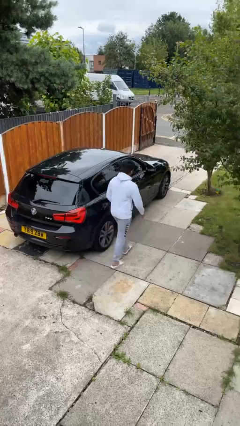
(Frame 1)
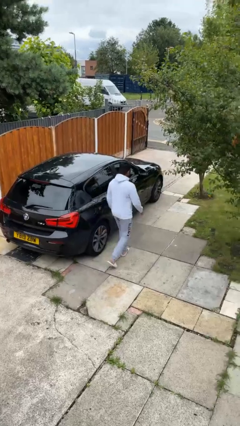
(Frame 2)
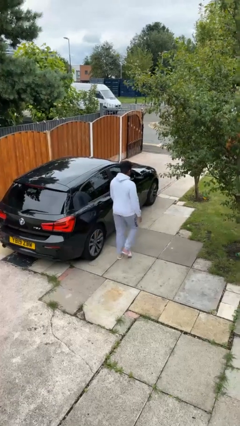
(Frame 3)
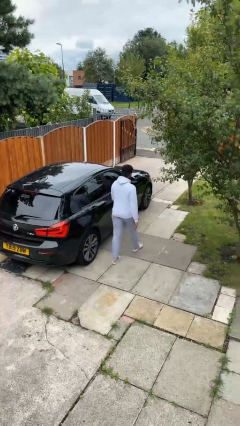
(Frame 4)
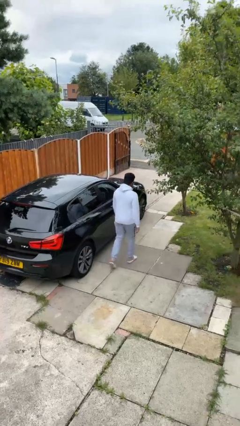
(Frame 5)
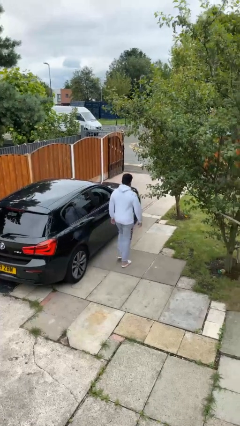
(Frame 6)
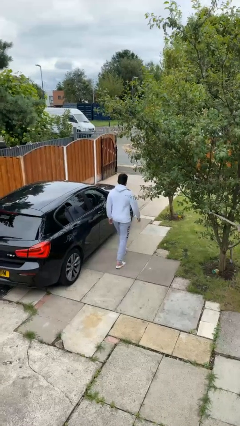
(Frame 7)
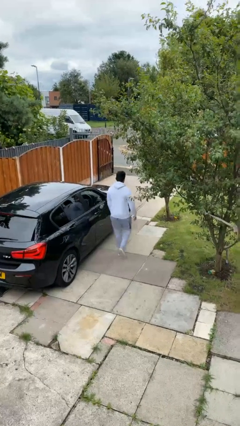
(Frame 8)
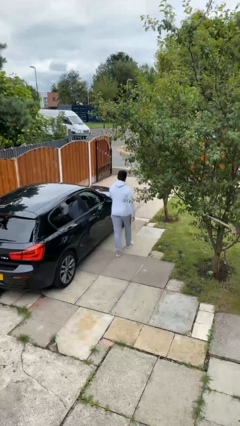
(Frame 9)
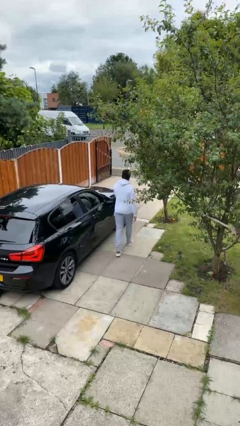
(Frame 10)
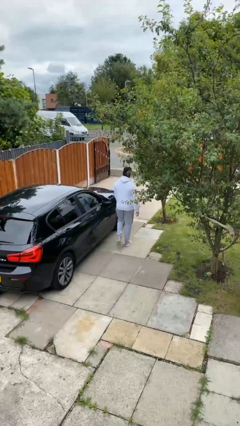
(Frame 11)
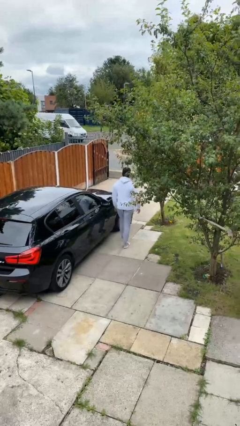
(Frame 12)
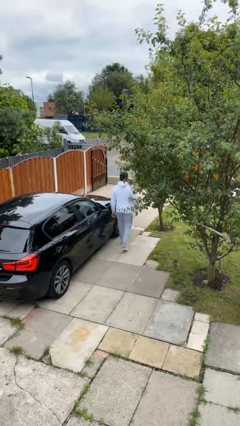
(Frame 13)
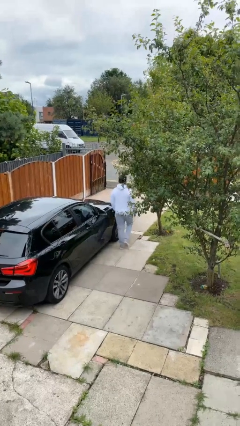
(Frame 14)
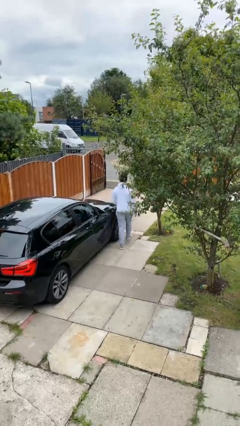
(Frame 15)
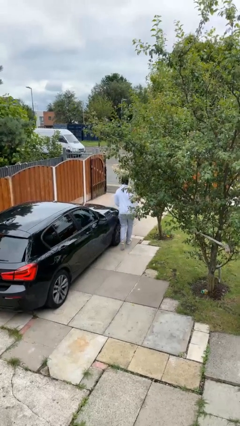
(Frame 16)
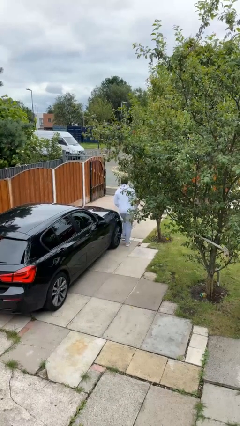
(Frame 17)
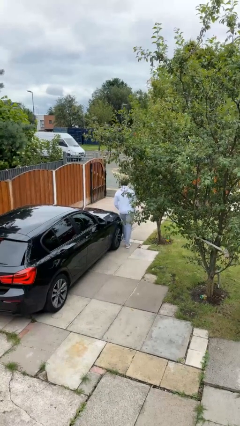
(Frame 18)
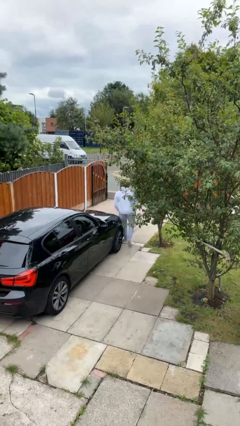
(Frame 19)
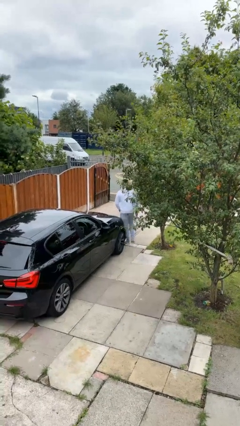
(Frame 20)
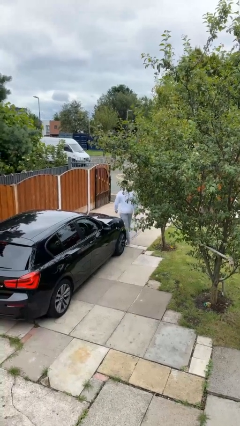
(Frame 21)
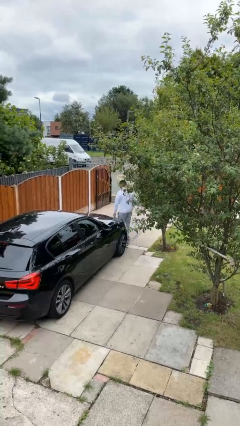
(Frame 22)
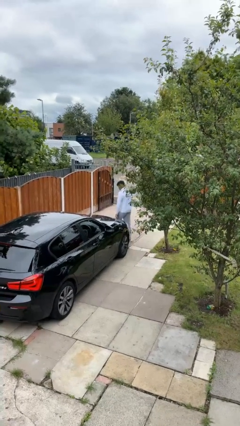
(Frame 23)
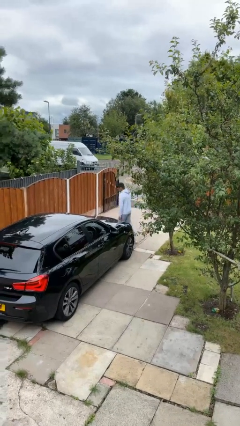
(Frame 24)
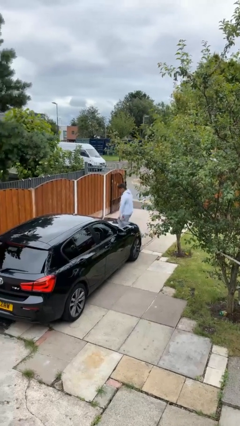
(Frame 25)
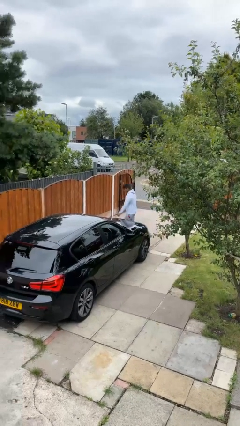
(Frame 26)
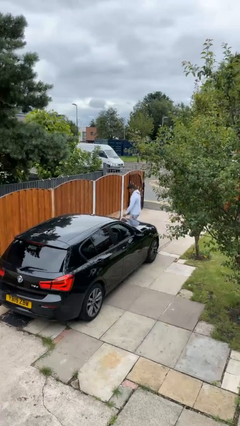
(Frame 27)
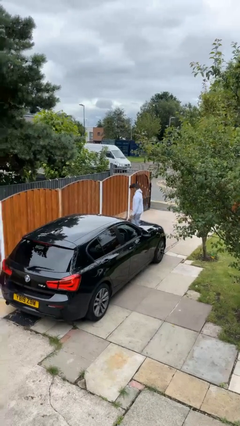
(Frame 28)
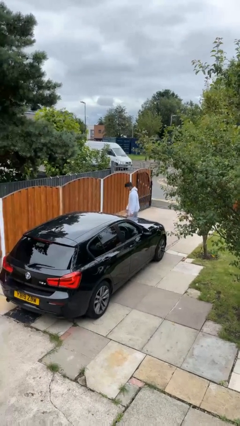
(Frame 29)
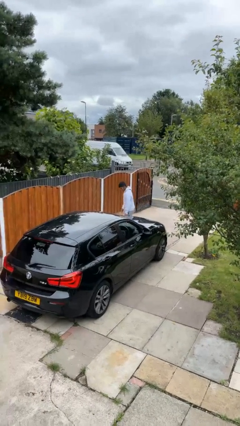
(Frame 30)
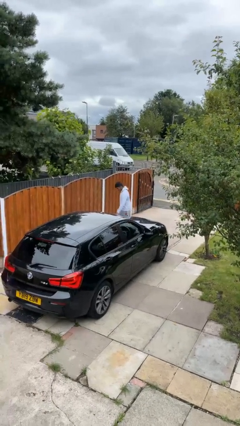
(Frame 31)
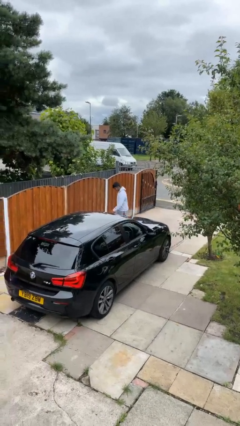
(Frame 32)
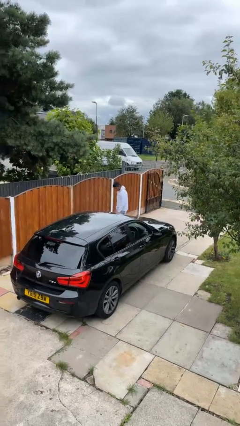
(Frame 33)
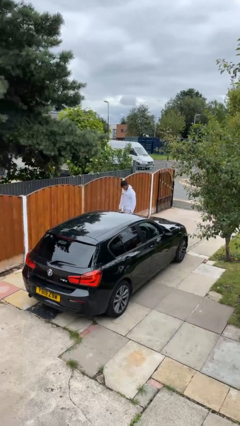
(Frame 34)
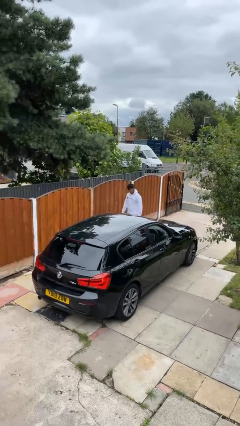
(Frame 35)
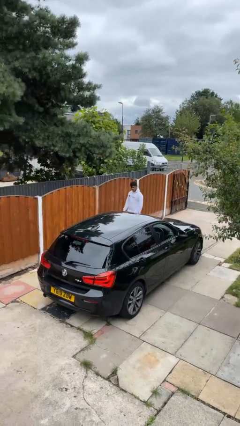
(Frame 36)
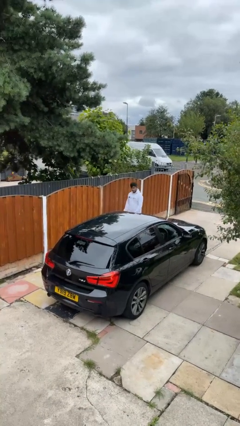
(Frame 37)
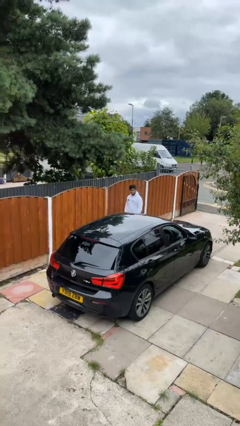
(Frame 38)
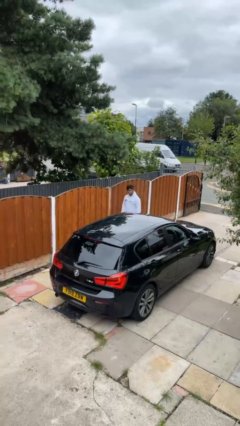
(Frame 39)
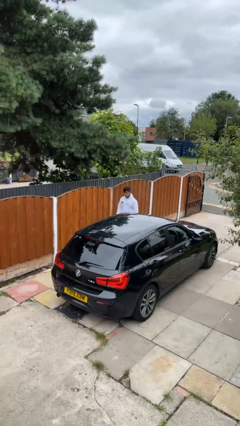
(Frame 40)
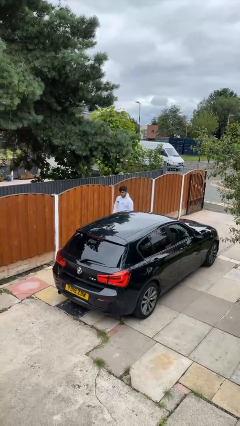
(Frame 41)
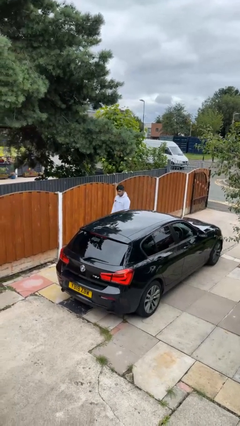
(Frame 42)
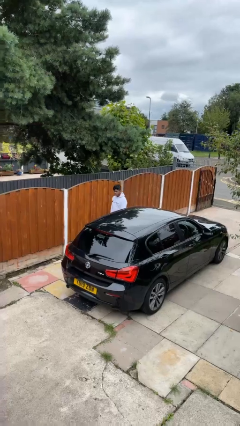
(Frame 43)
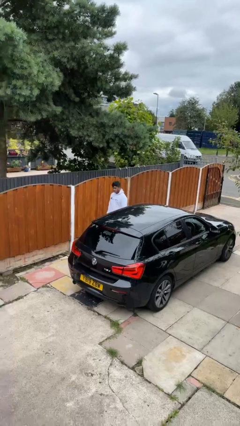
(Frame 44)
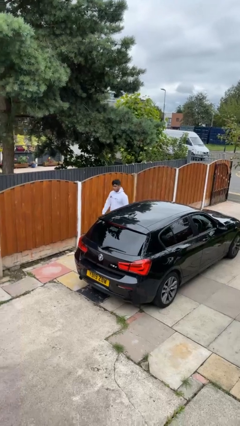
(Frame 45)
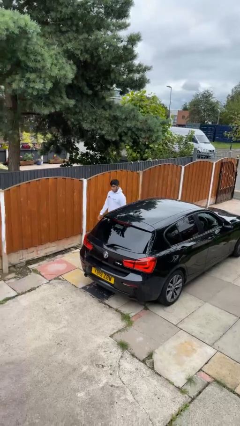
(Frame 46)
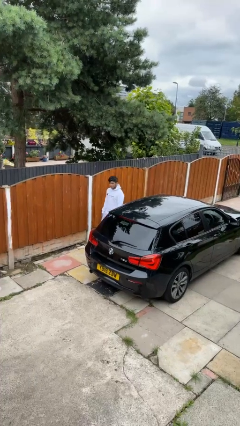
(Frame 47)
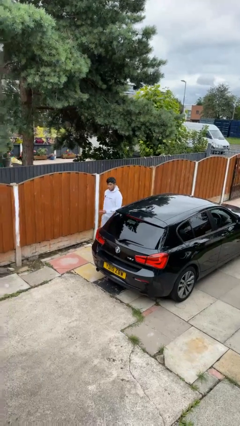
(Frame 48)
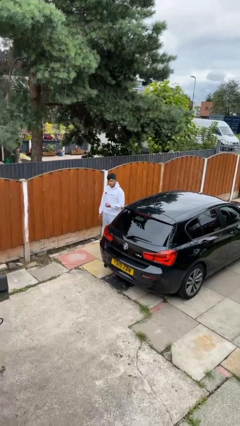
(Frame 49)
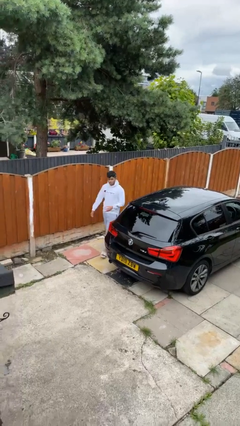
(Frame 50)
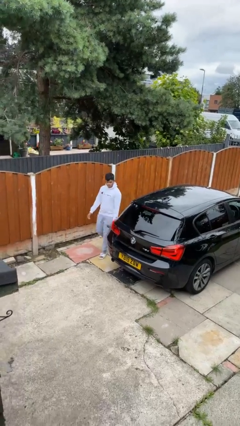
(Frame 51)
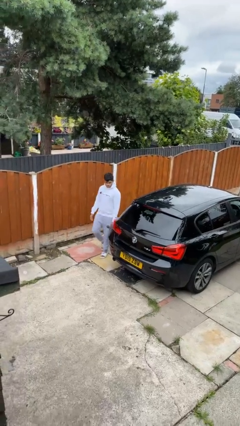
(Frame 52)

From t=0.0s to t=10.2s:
person walks around car

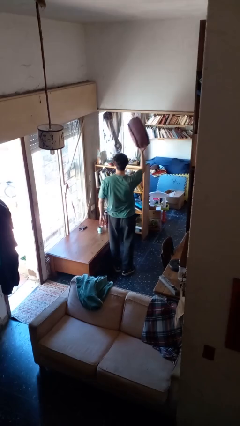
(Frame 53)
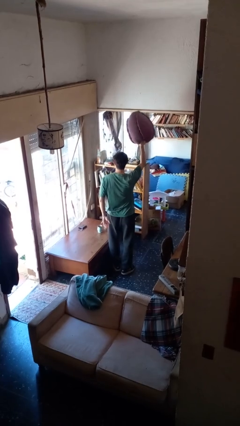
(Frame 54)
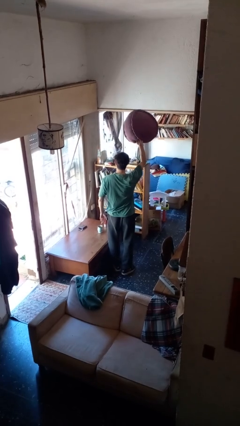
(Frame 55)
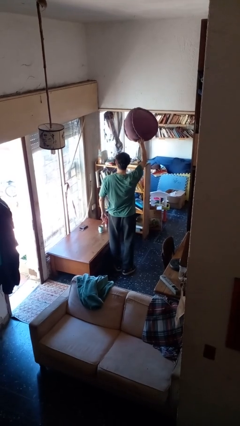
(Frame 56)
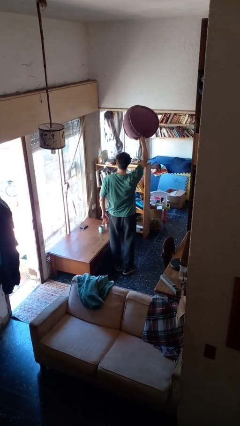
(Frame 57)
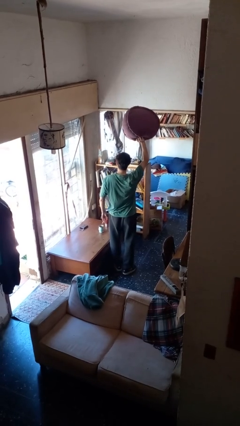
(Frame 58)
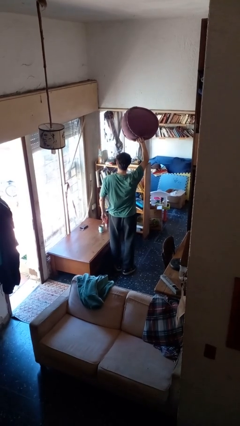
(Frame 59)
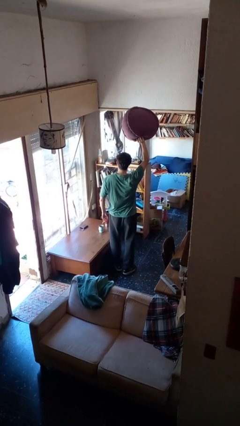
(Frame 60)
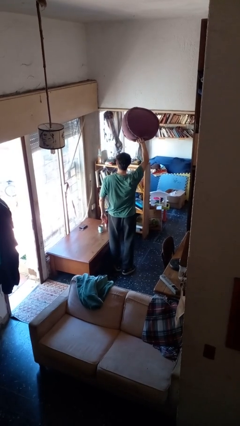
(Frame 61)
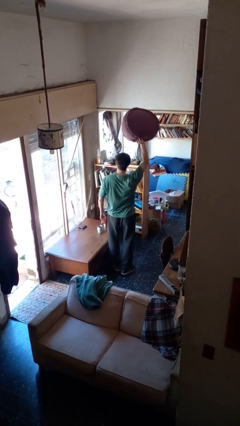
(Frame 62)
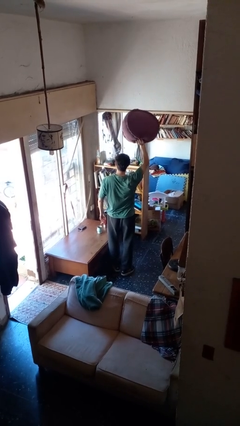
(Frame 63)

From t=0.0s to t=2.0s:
person holds object above head

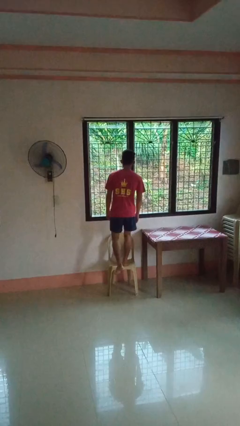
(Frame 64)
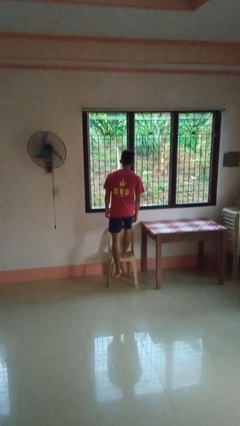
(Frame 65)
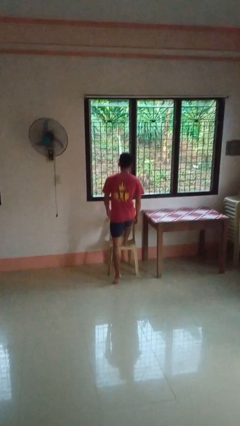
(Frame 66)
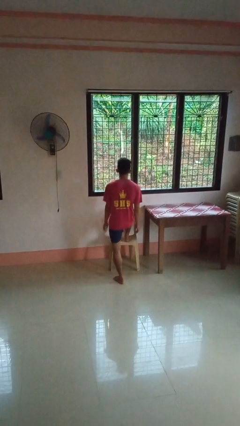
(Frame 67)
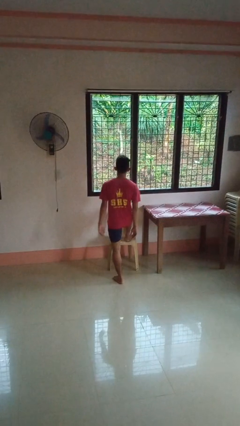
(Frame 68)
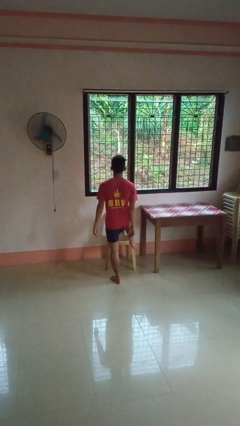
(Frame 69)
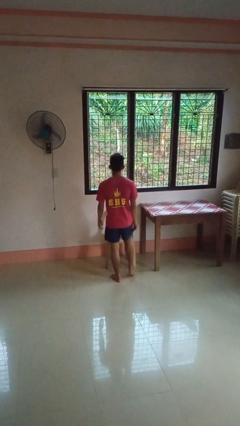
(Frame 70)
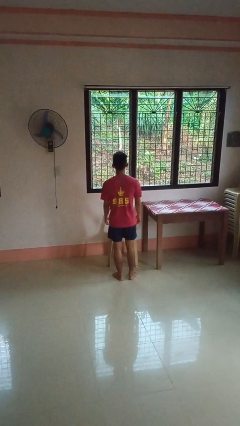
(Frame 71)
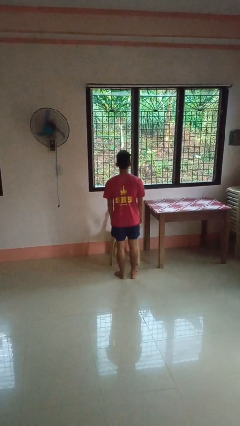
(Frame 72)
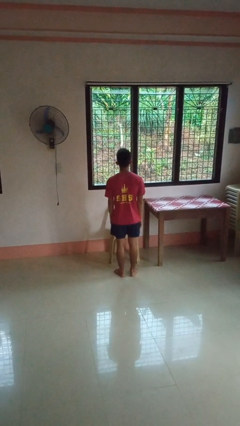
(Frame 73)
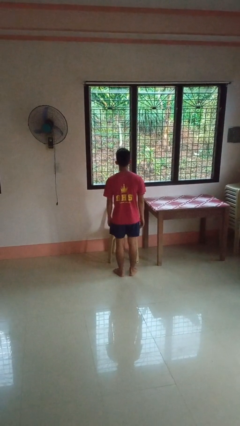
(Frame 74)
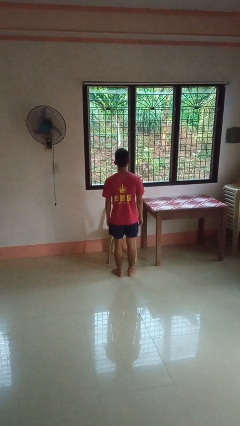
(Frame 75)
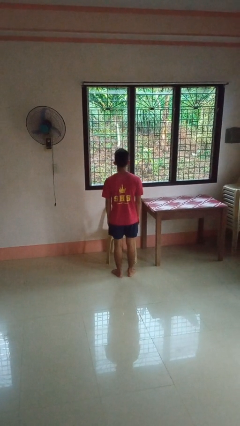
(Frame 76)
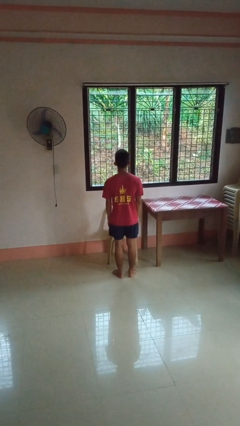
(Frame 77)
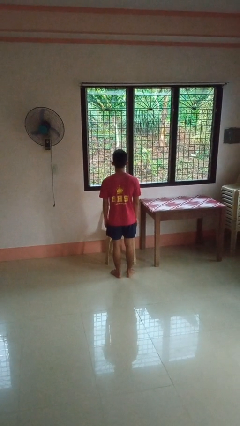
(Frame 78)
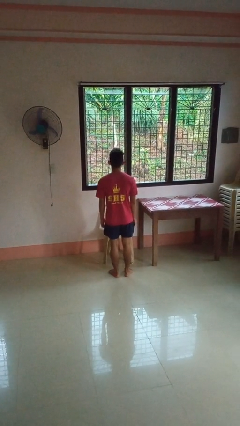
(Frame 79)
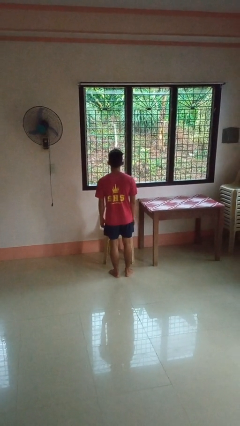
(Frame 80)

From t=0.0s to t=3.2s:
person climbs off chair

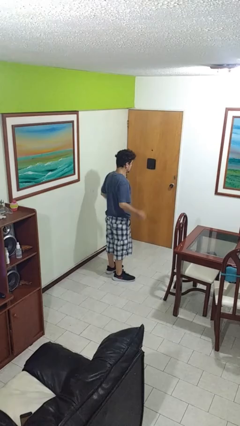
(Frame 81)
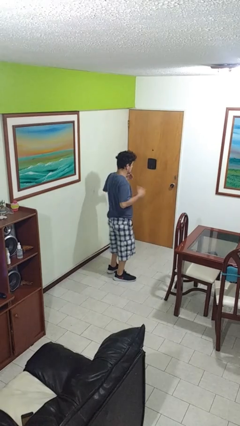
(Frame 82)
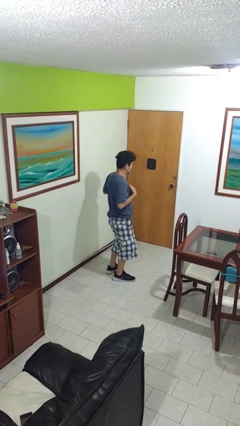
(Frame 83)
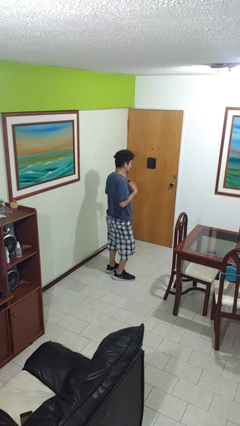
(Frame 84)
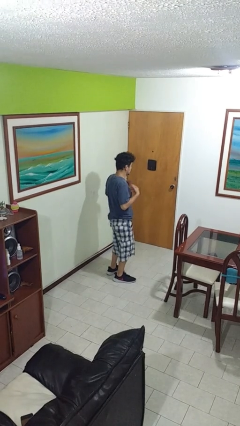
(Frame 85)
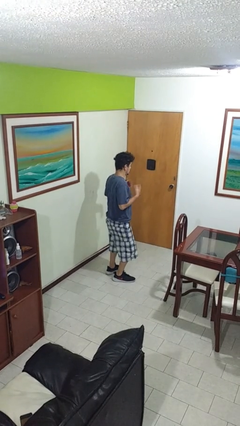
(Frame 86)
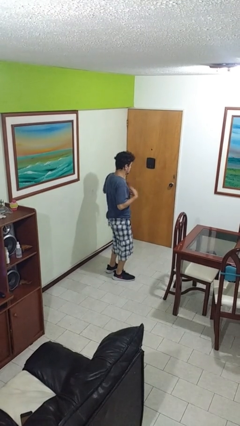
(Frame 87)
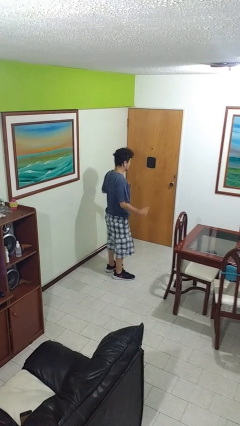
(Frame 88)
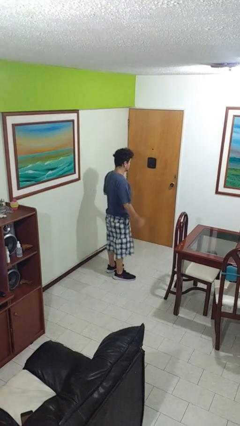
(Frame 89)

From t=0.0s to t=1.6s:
person drums on chest

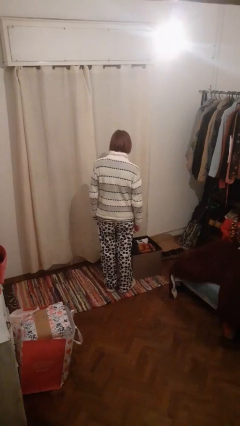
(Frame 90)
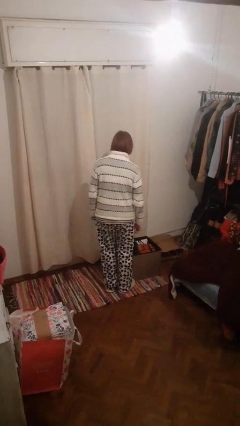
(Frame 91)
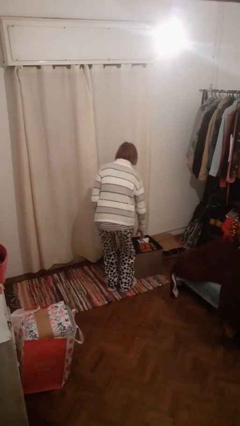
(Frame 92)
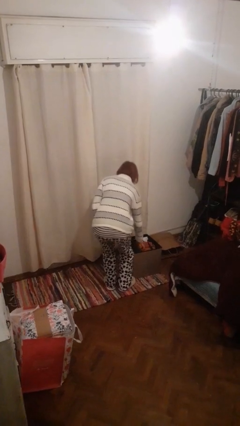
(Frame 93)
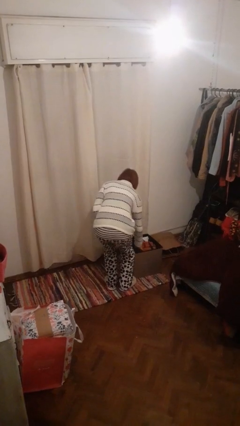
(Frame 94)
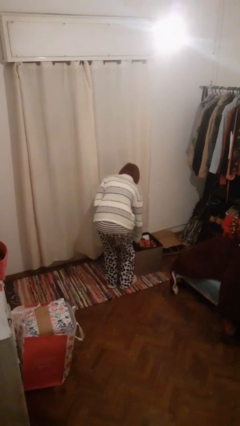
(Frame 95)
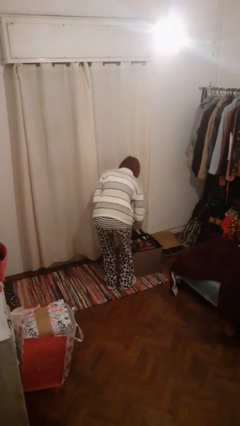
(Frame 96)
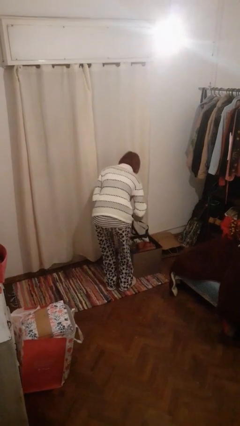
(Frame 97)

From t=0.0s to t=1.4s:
person takes object from basket
